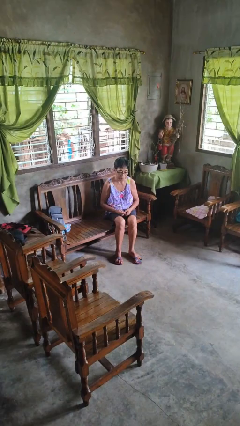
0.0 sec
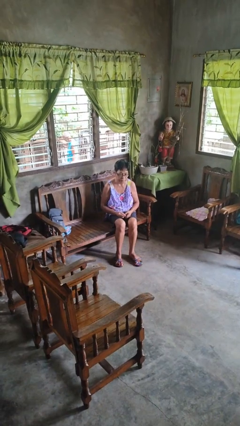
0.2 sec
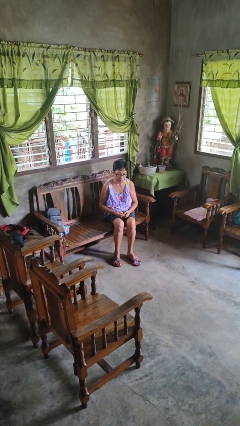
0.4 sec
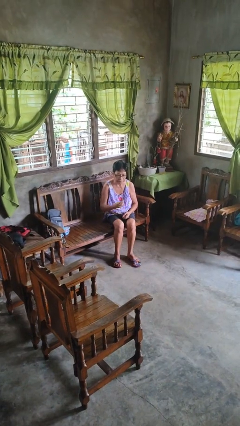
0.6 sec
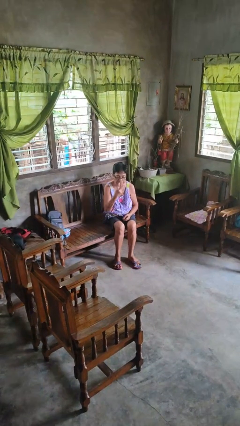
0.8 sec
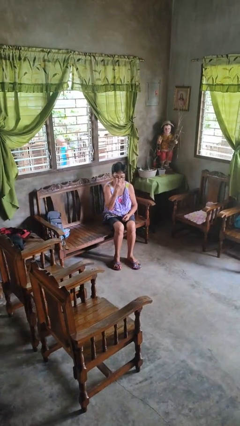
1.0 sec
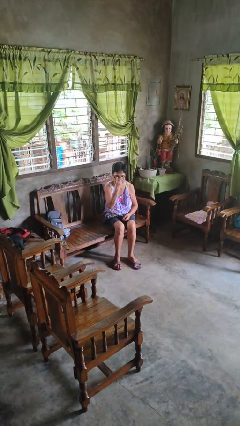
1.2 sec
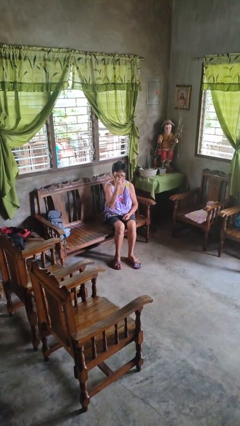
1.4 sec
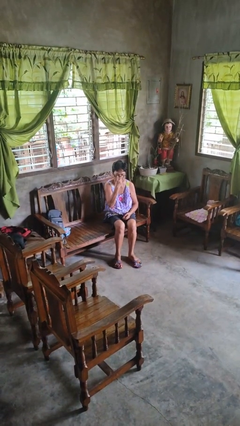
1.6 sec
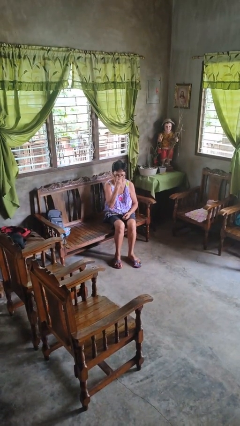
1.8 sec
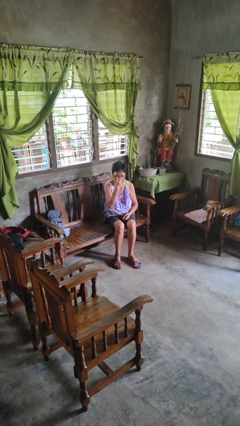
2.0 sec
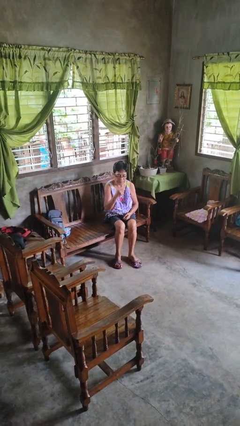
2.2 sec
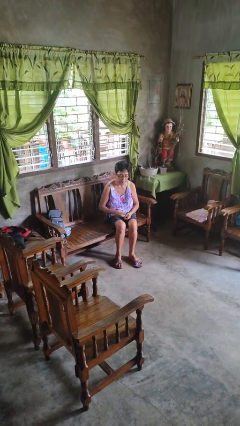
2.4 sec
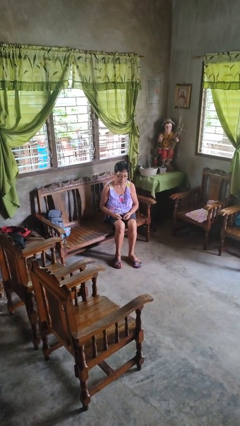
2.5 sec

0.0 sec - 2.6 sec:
person gestures watch closely

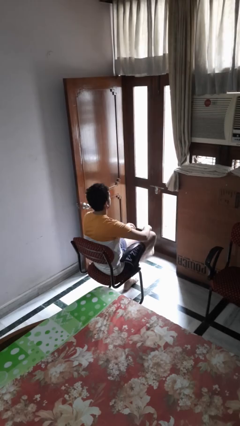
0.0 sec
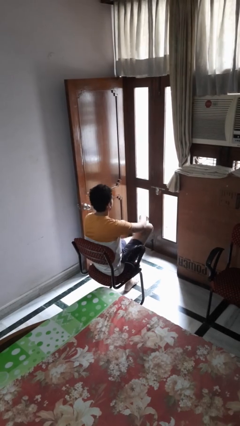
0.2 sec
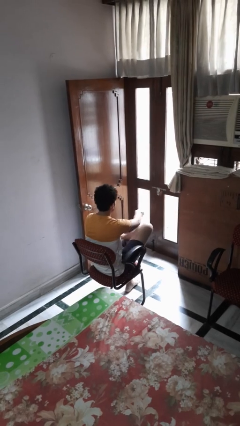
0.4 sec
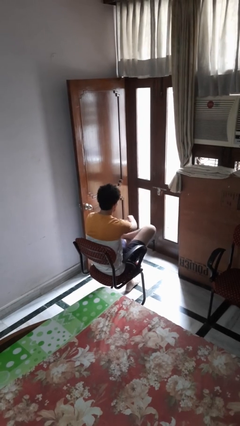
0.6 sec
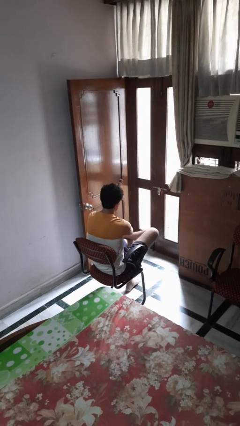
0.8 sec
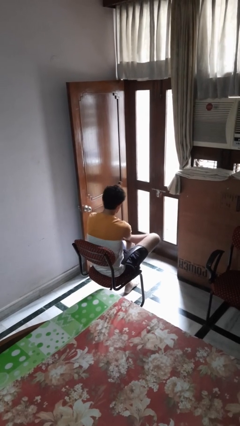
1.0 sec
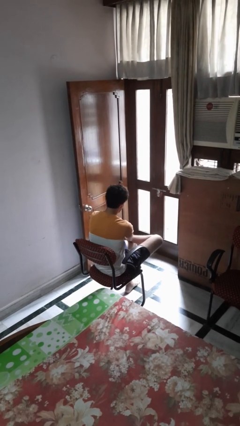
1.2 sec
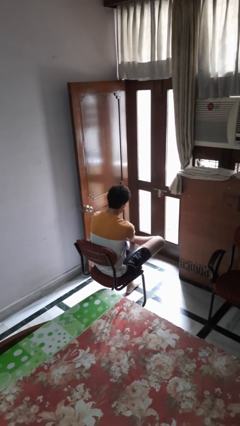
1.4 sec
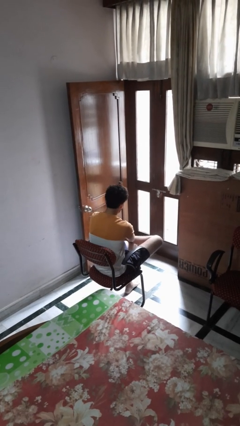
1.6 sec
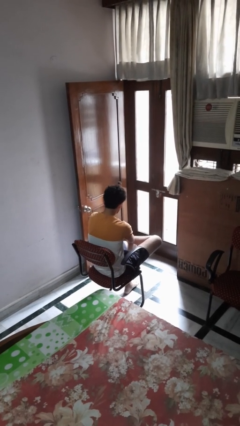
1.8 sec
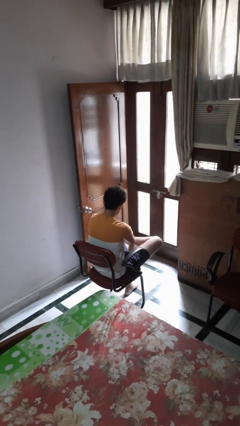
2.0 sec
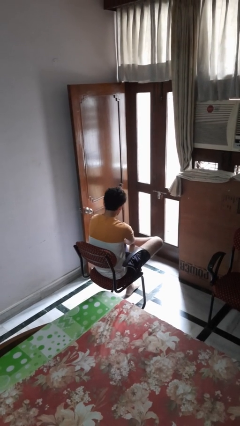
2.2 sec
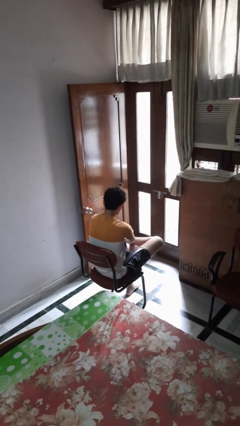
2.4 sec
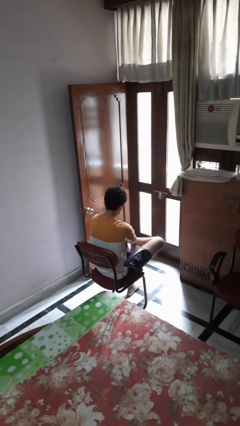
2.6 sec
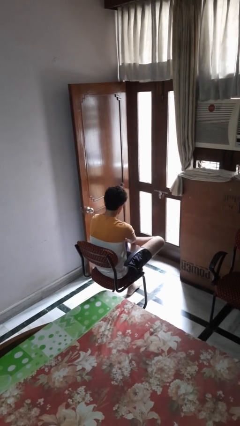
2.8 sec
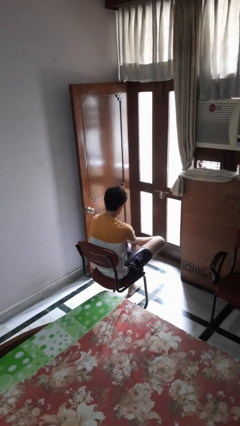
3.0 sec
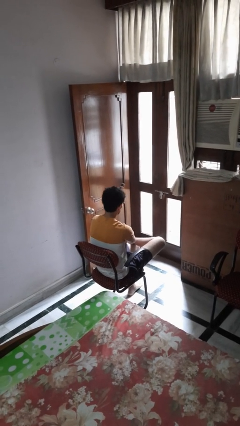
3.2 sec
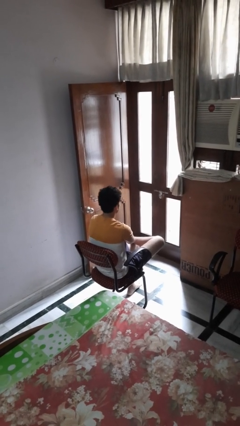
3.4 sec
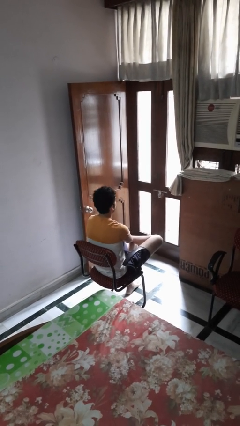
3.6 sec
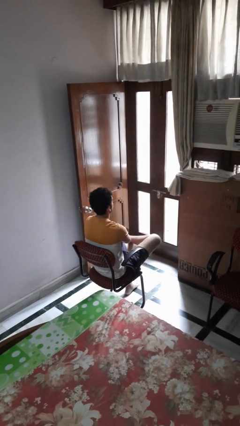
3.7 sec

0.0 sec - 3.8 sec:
person rubs foot

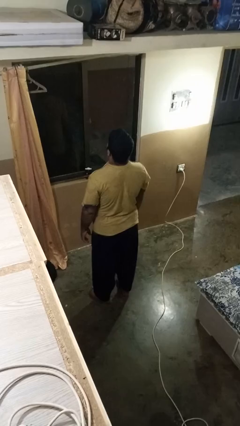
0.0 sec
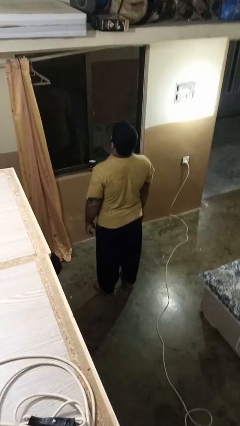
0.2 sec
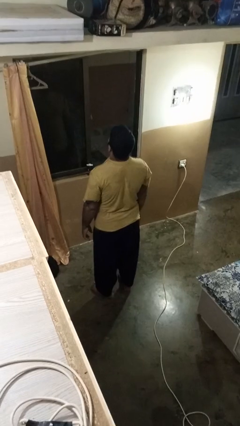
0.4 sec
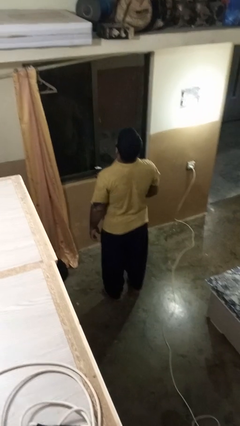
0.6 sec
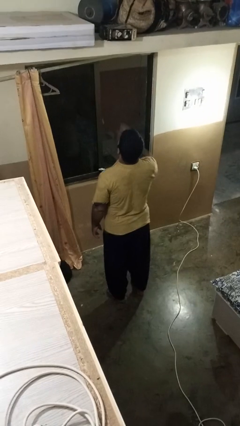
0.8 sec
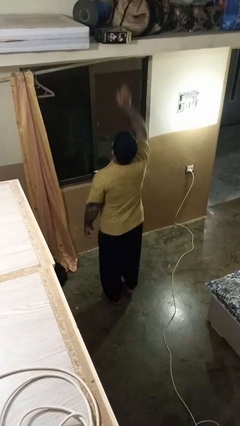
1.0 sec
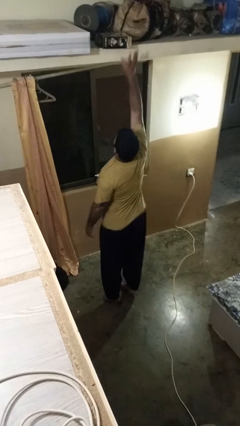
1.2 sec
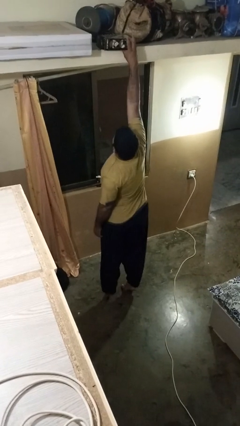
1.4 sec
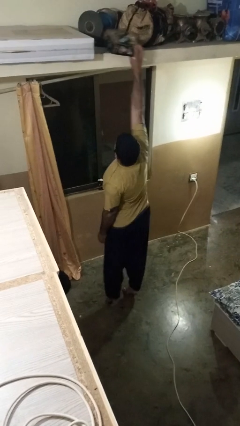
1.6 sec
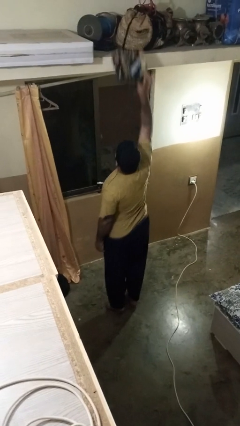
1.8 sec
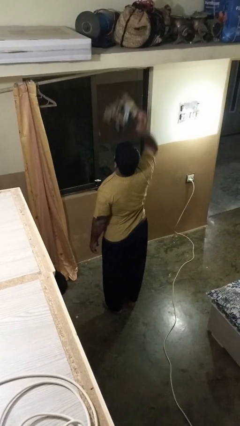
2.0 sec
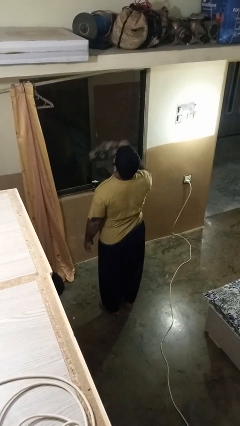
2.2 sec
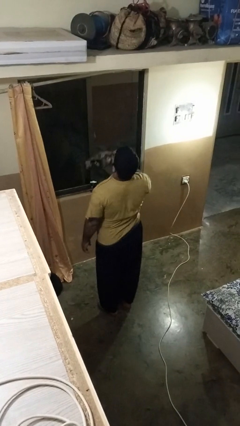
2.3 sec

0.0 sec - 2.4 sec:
person picks up object from shelf

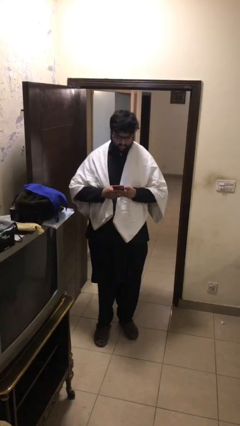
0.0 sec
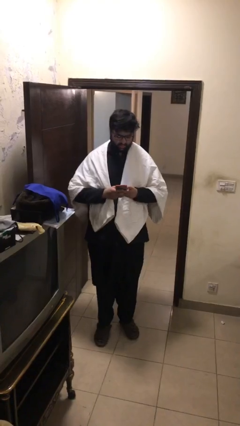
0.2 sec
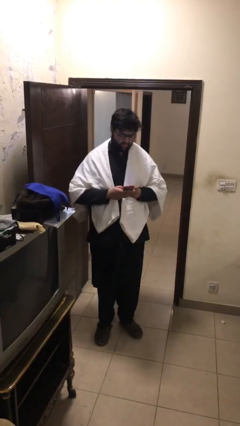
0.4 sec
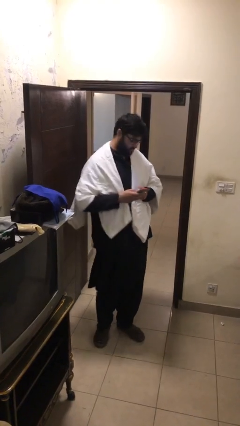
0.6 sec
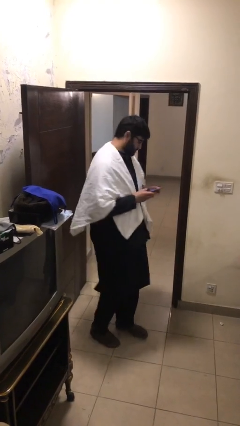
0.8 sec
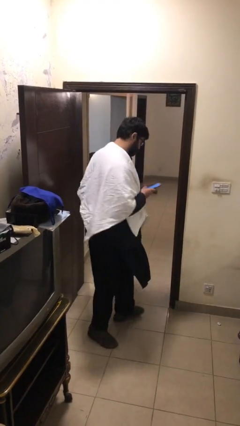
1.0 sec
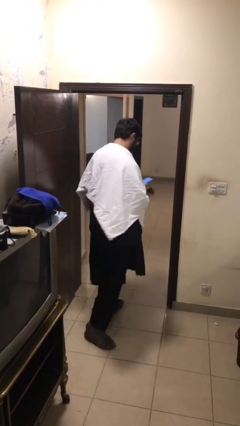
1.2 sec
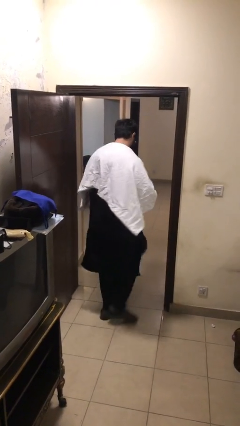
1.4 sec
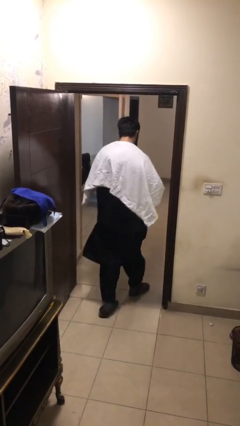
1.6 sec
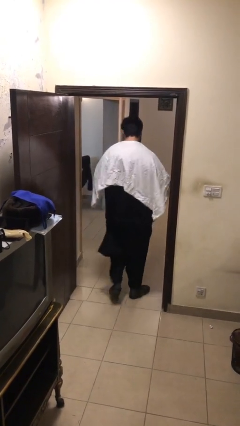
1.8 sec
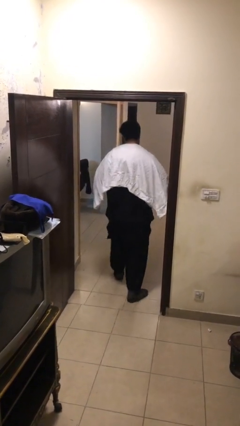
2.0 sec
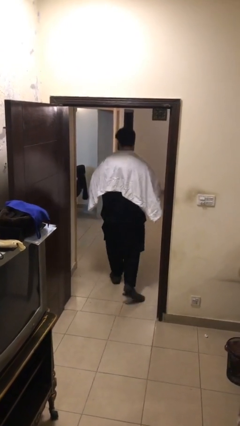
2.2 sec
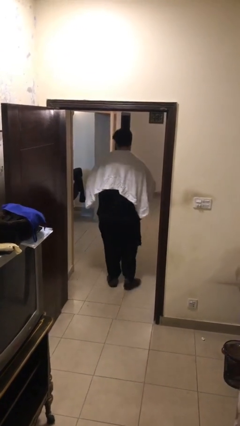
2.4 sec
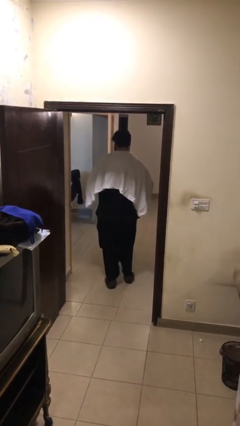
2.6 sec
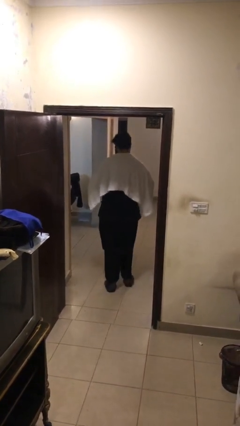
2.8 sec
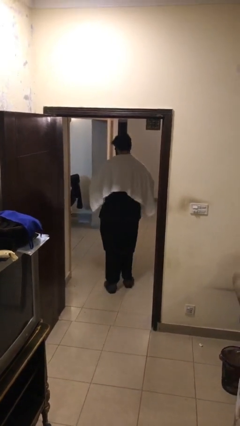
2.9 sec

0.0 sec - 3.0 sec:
person exits scene through structure

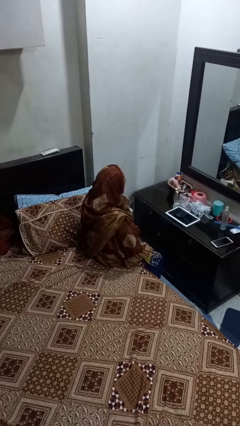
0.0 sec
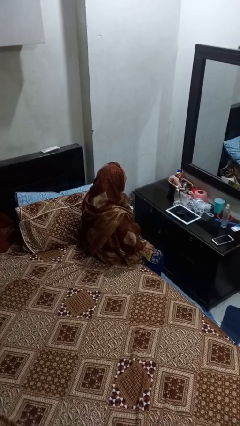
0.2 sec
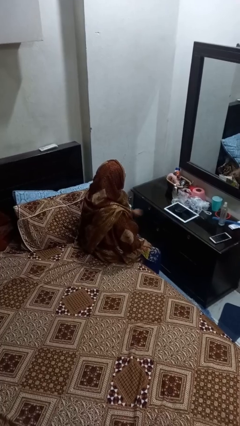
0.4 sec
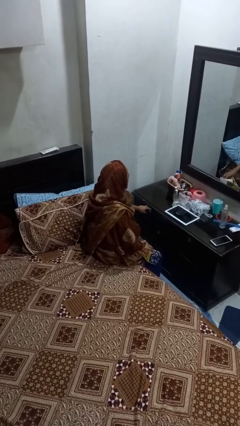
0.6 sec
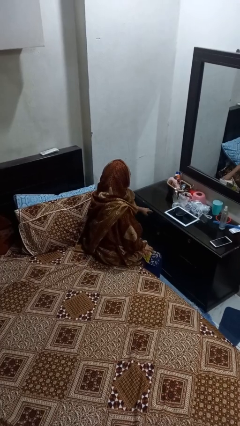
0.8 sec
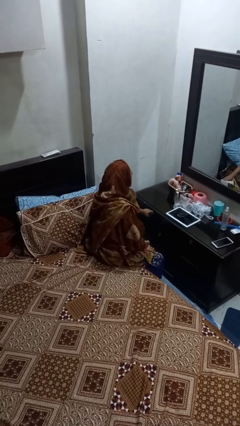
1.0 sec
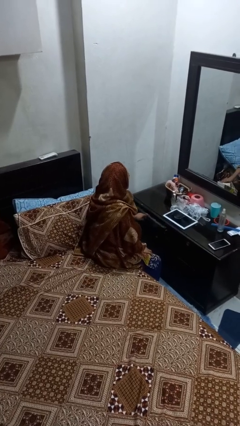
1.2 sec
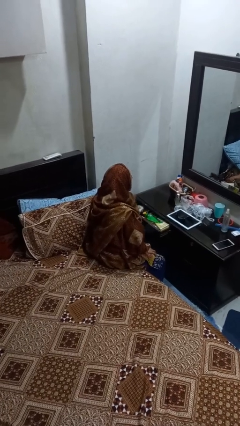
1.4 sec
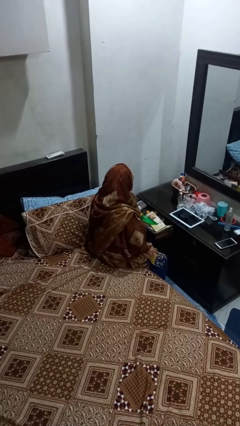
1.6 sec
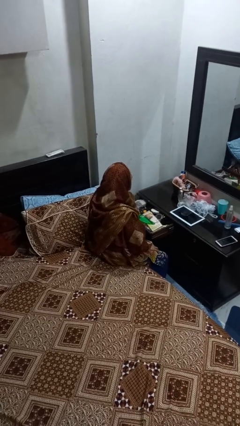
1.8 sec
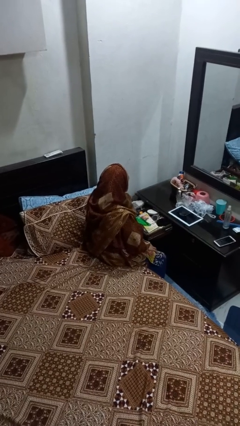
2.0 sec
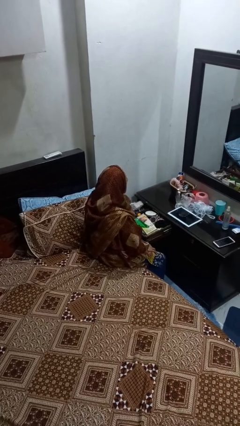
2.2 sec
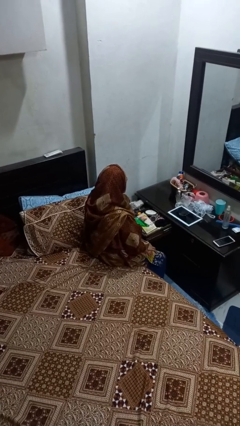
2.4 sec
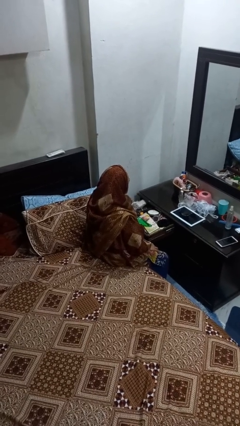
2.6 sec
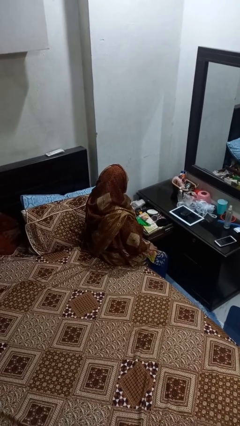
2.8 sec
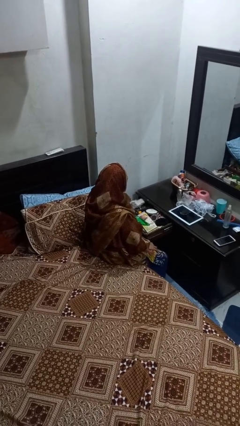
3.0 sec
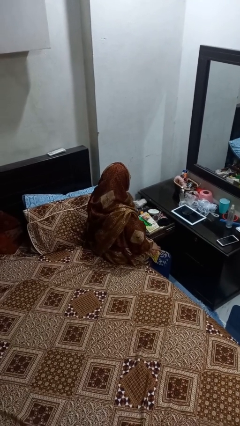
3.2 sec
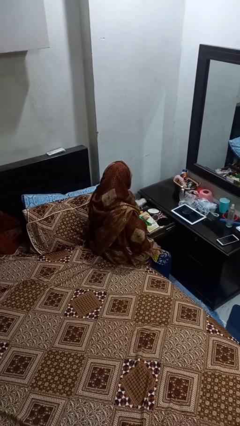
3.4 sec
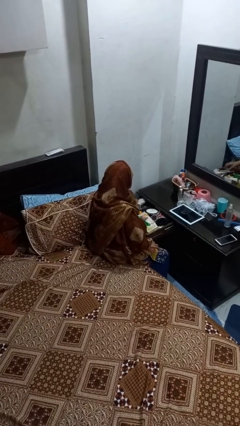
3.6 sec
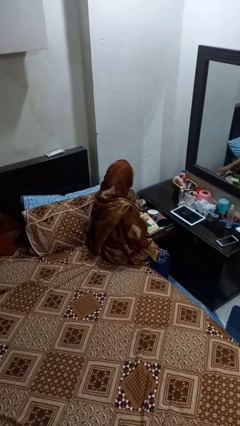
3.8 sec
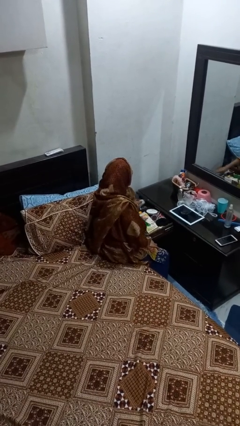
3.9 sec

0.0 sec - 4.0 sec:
person opens dresser drawer

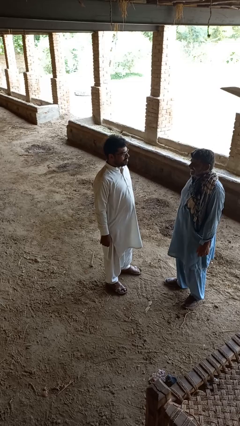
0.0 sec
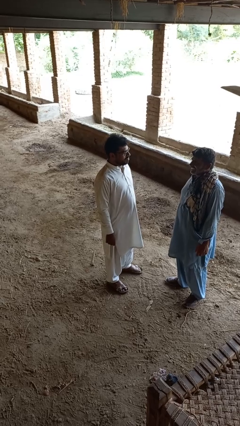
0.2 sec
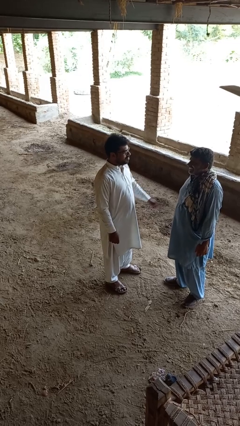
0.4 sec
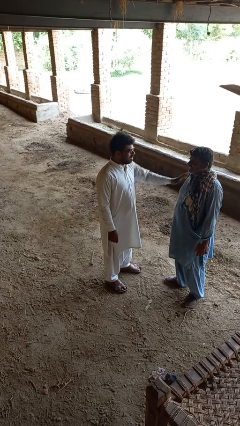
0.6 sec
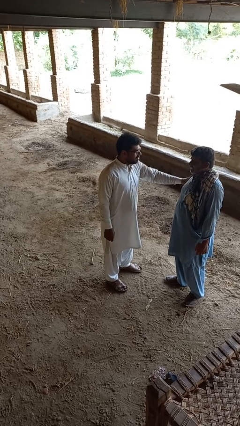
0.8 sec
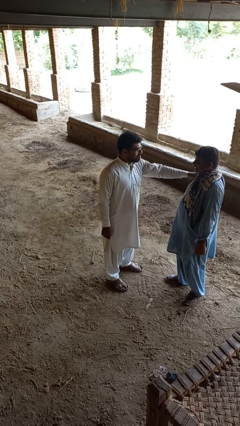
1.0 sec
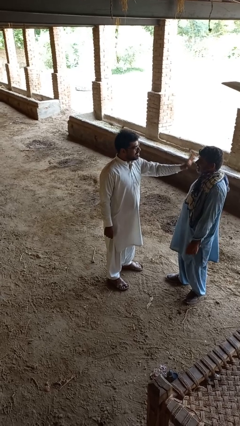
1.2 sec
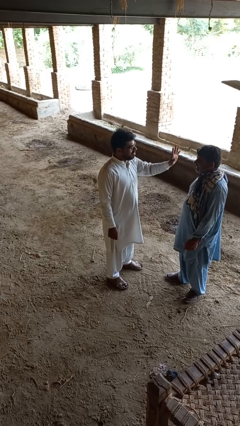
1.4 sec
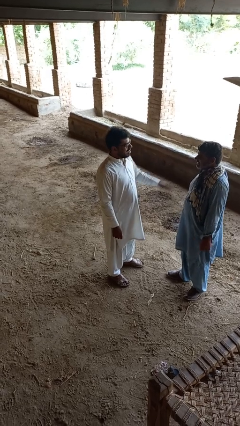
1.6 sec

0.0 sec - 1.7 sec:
person shoves person
